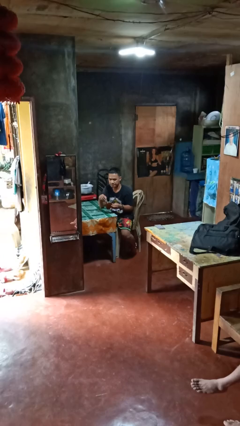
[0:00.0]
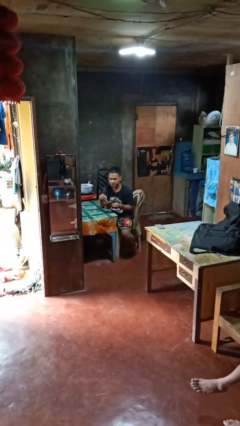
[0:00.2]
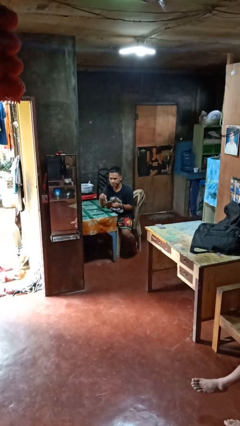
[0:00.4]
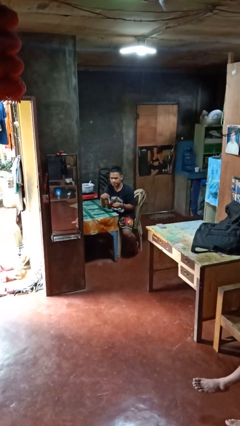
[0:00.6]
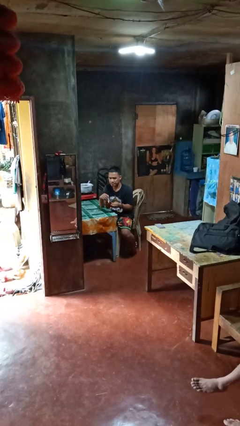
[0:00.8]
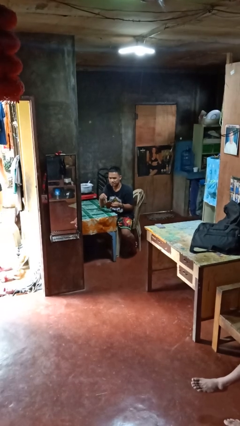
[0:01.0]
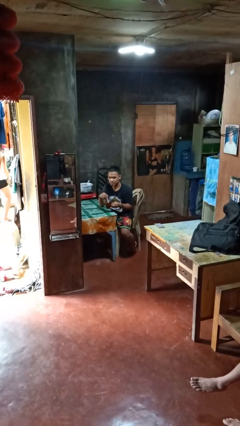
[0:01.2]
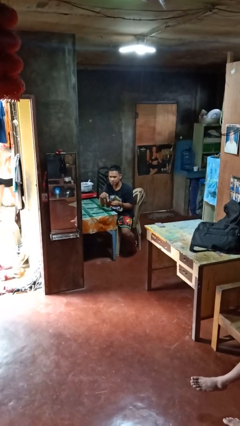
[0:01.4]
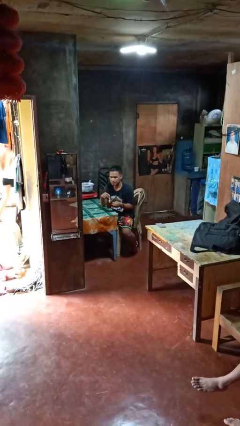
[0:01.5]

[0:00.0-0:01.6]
person stirs mug

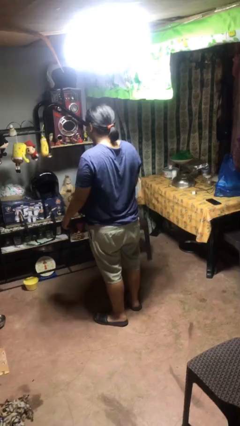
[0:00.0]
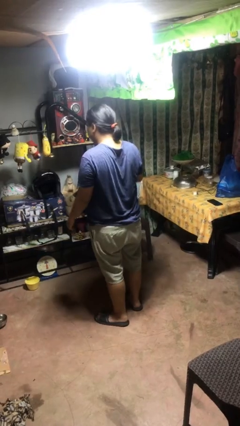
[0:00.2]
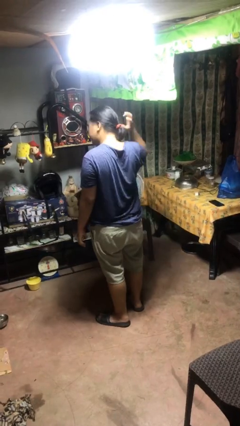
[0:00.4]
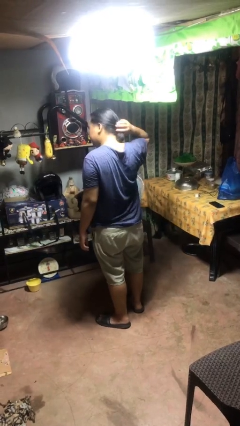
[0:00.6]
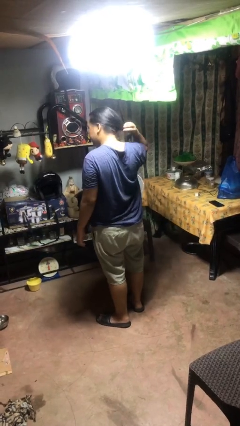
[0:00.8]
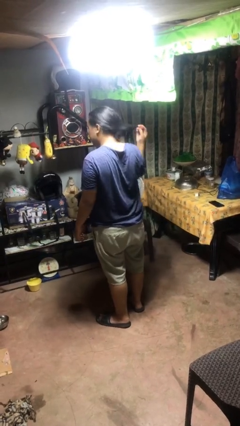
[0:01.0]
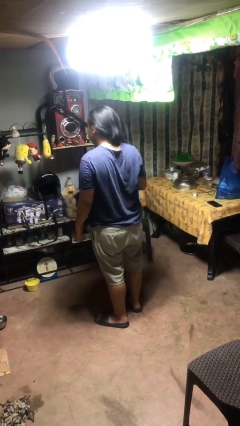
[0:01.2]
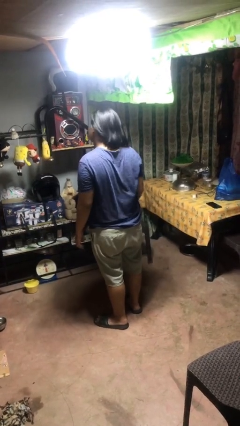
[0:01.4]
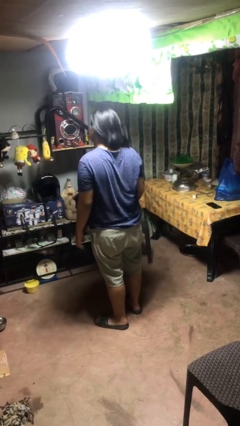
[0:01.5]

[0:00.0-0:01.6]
person takes off hairtie

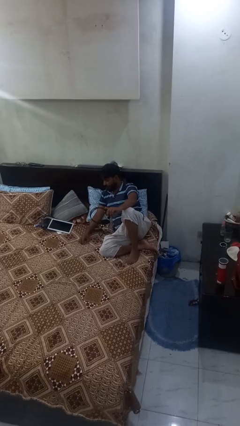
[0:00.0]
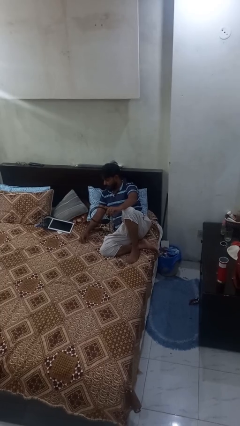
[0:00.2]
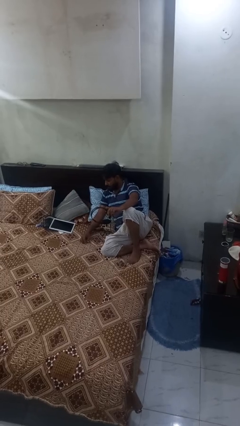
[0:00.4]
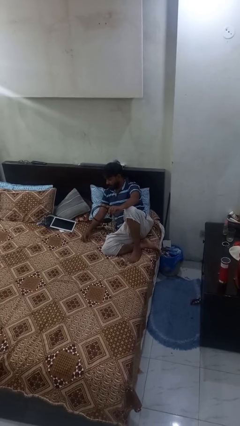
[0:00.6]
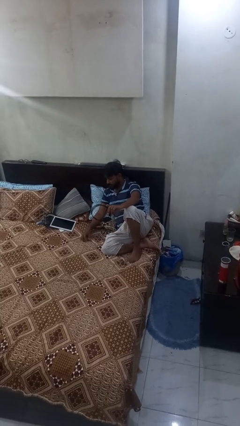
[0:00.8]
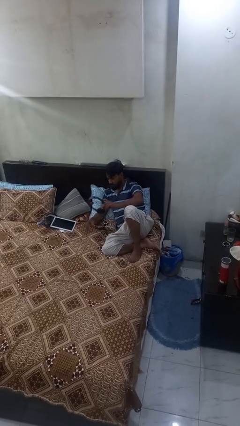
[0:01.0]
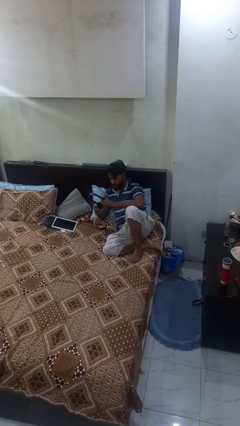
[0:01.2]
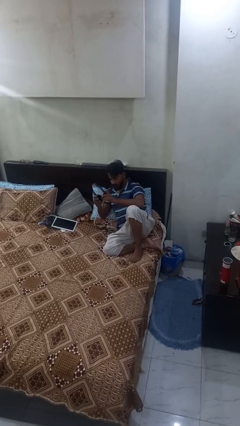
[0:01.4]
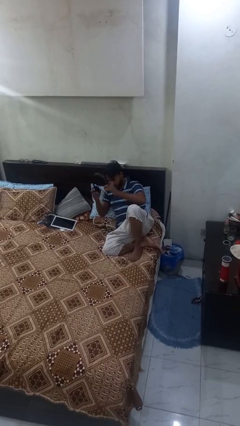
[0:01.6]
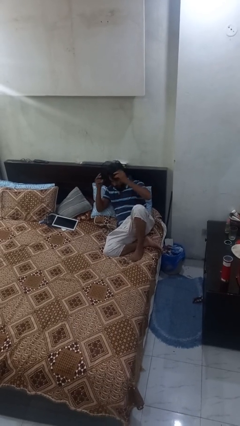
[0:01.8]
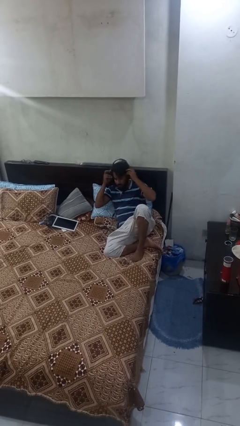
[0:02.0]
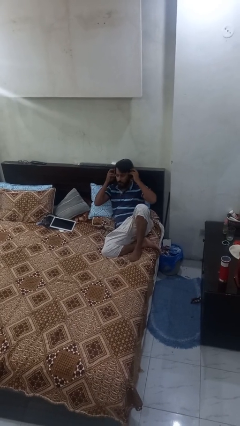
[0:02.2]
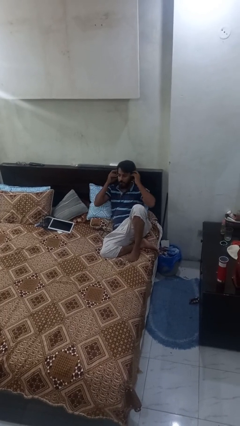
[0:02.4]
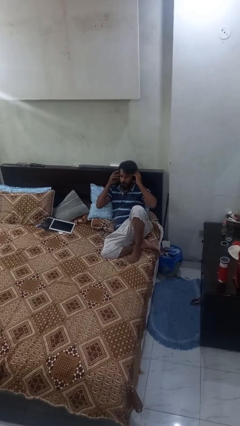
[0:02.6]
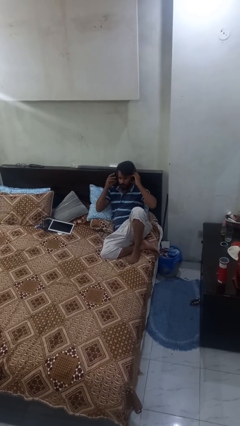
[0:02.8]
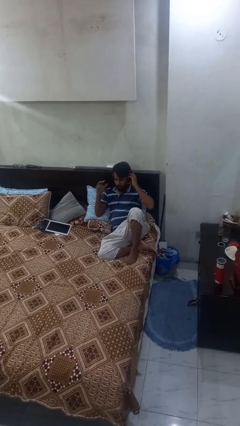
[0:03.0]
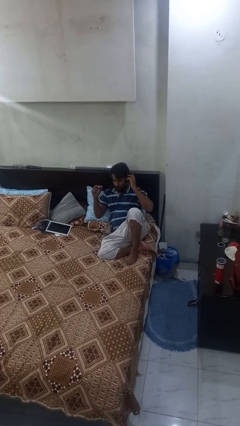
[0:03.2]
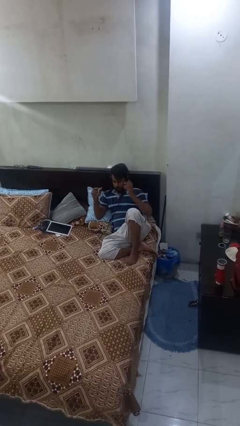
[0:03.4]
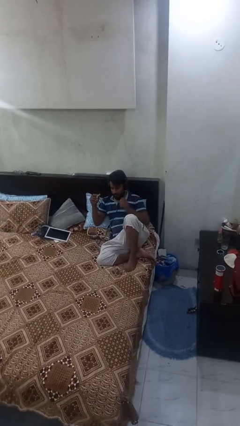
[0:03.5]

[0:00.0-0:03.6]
person puts on headphones

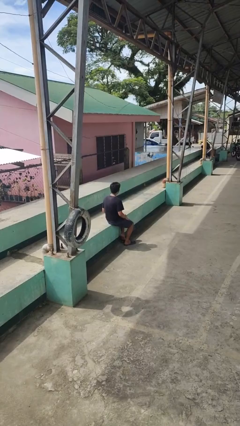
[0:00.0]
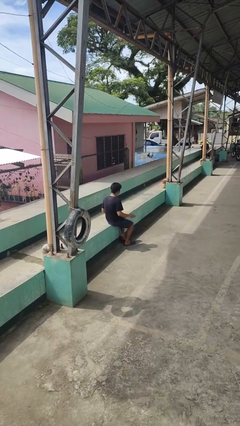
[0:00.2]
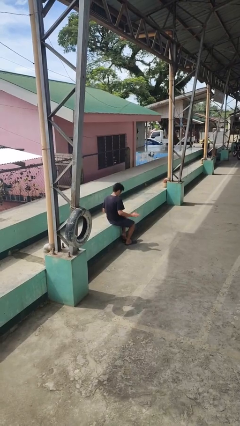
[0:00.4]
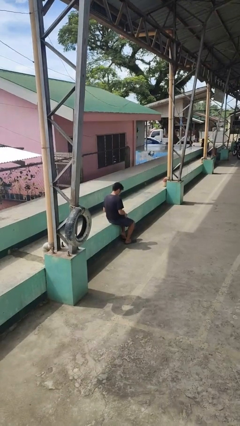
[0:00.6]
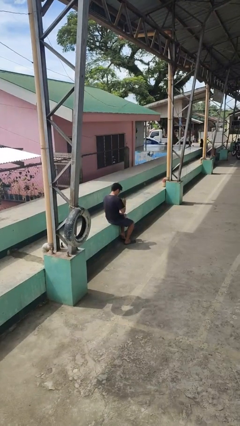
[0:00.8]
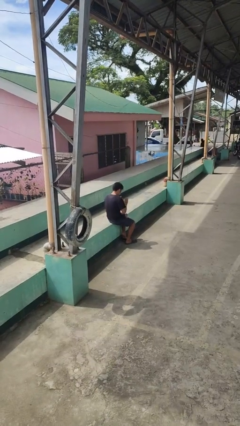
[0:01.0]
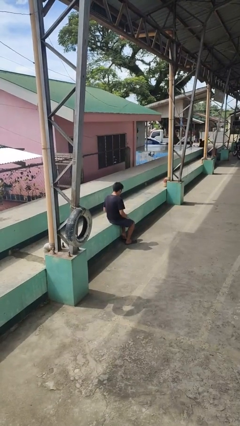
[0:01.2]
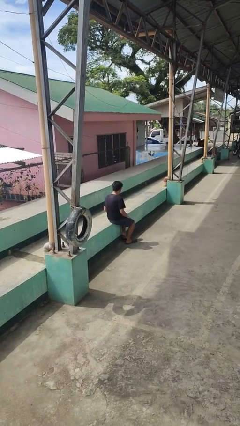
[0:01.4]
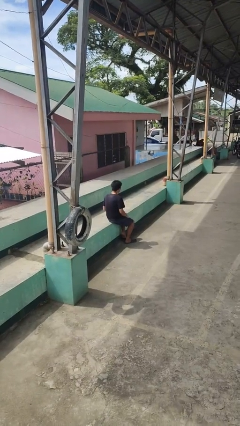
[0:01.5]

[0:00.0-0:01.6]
person slaps hands on thighs

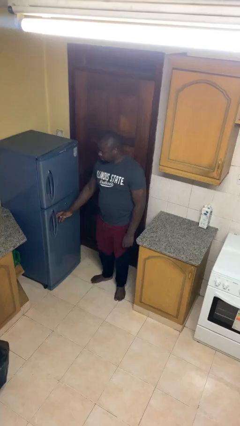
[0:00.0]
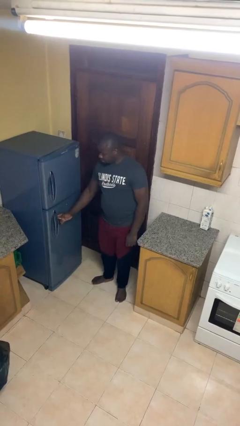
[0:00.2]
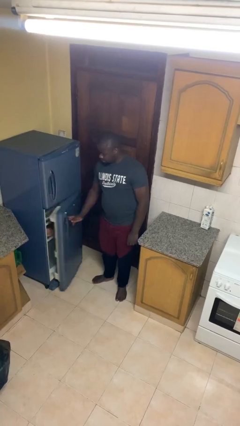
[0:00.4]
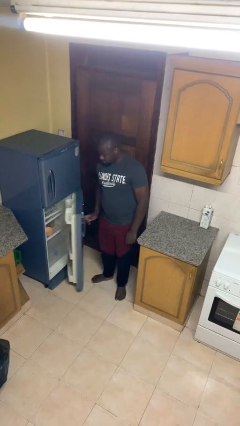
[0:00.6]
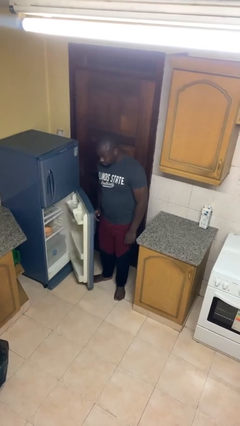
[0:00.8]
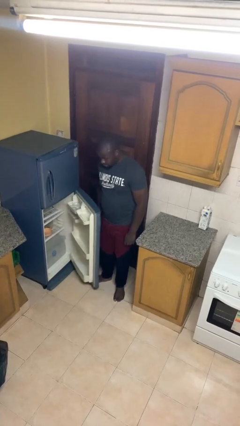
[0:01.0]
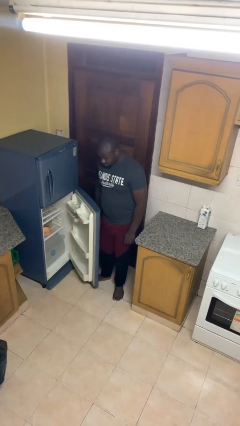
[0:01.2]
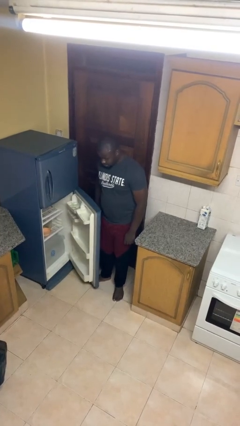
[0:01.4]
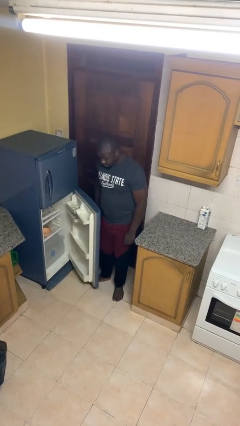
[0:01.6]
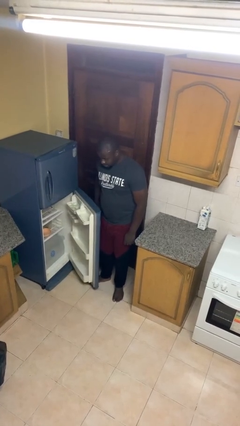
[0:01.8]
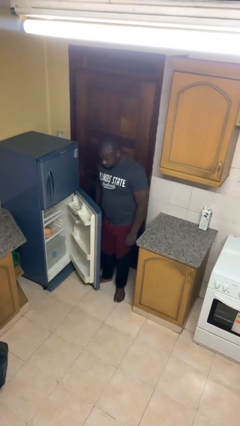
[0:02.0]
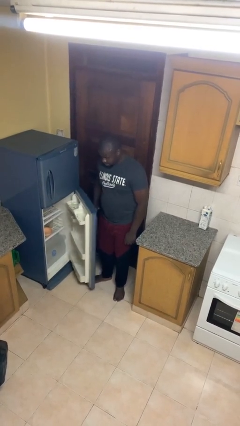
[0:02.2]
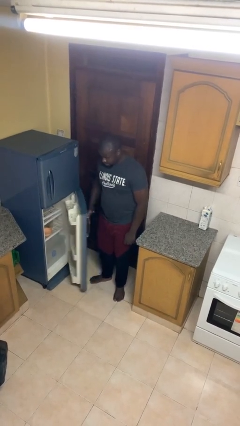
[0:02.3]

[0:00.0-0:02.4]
person opens refrigerator

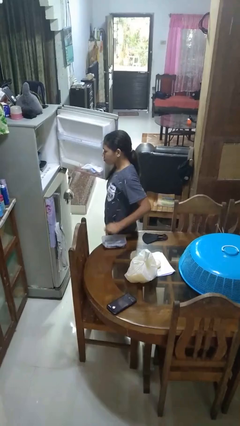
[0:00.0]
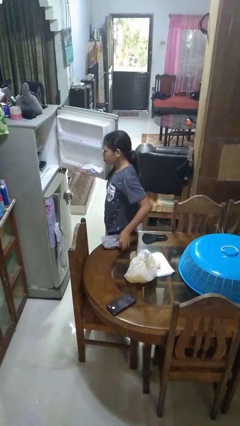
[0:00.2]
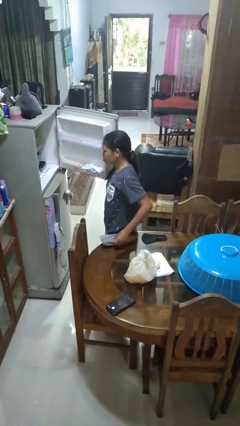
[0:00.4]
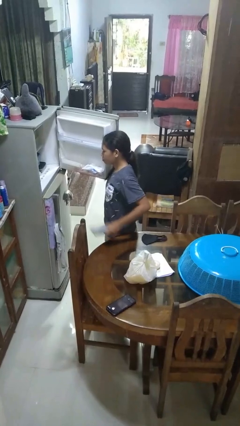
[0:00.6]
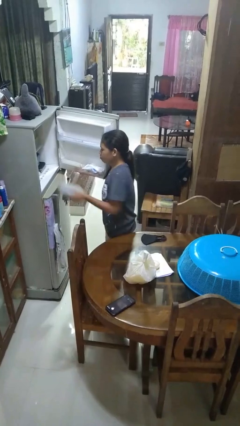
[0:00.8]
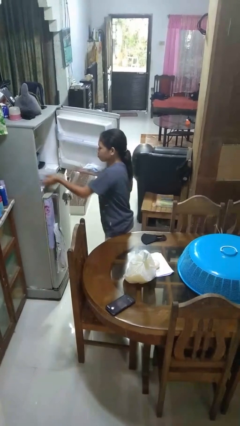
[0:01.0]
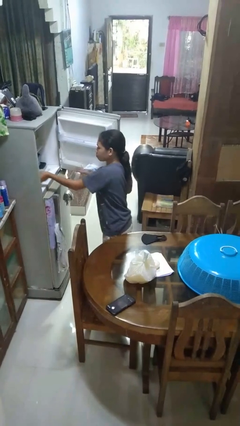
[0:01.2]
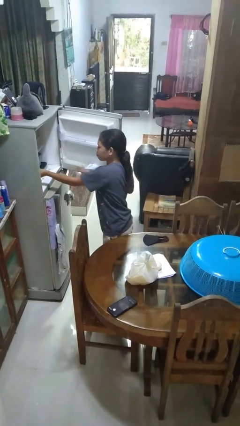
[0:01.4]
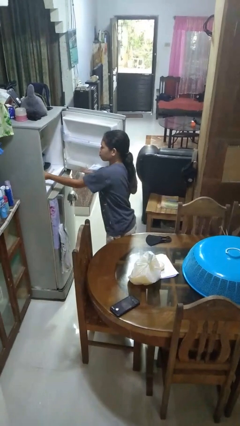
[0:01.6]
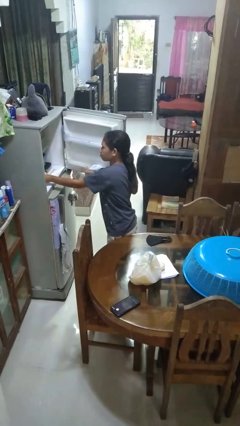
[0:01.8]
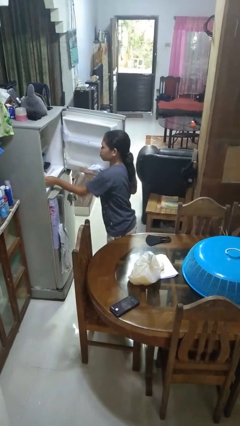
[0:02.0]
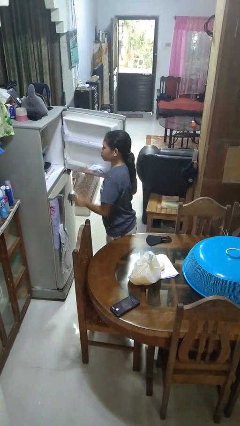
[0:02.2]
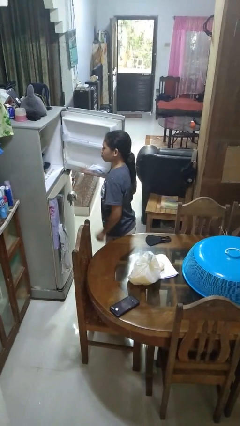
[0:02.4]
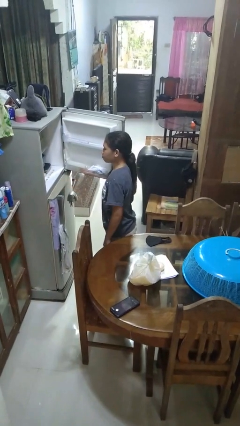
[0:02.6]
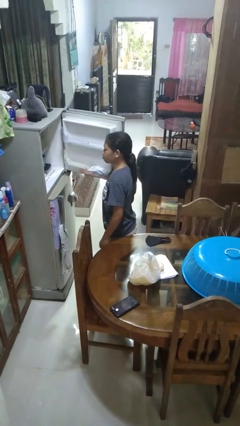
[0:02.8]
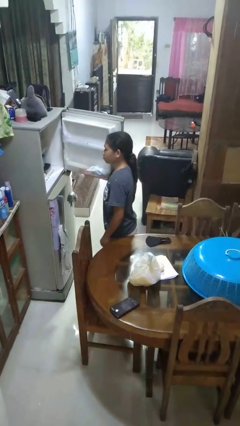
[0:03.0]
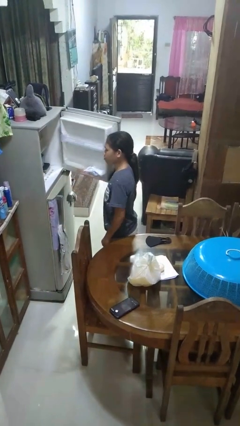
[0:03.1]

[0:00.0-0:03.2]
person puts object into refrigerator

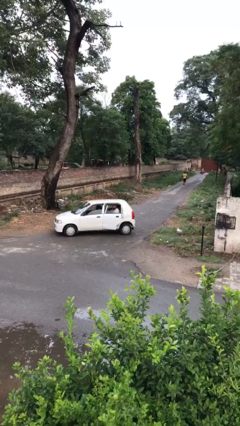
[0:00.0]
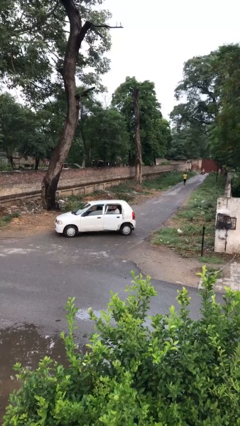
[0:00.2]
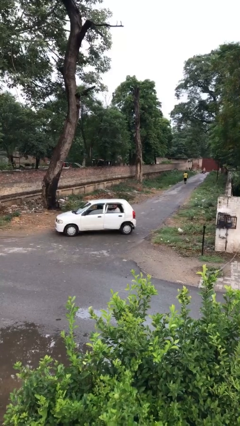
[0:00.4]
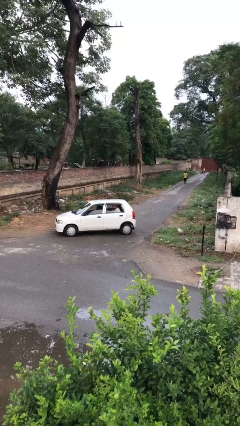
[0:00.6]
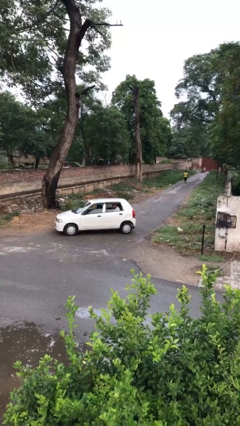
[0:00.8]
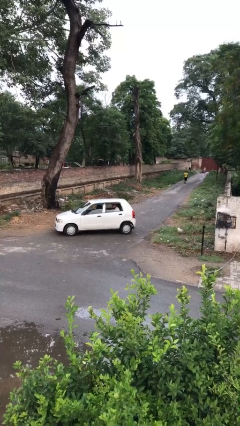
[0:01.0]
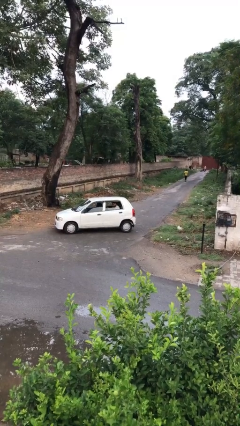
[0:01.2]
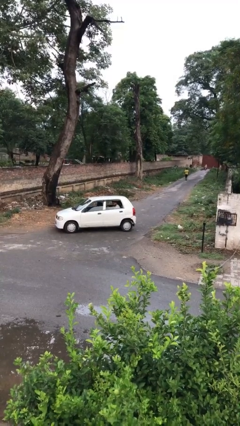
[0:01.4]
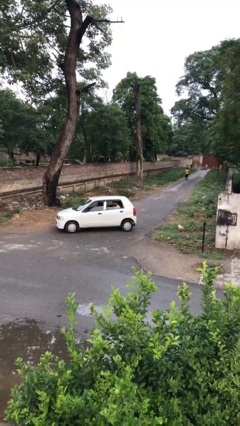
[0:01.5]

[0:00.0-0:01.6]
person closes car door

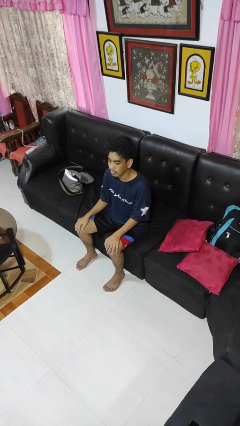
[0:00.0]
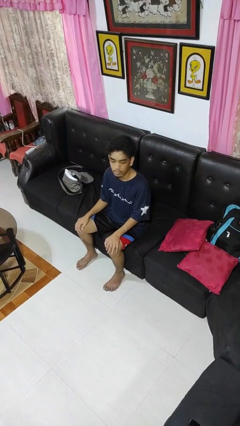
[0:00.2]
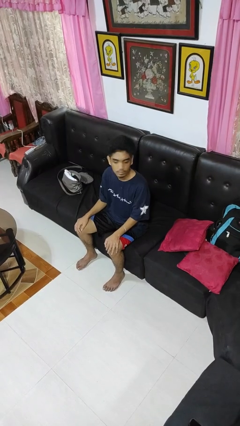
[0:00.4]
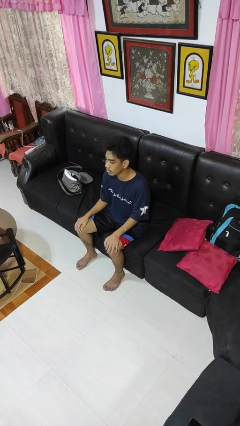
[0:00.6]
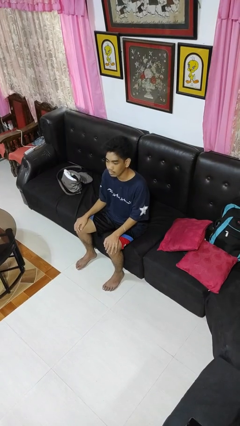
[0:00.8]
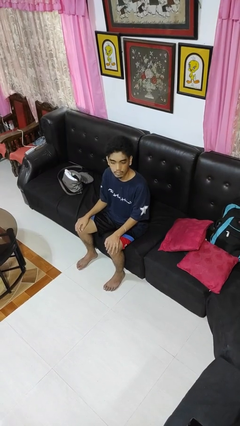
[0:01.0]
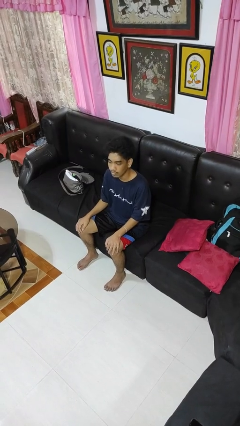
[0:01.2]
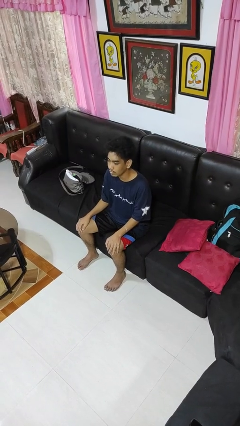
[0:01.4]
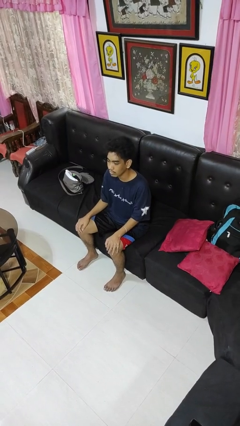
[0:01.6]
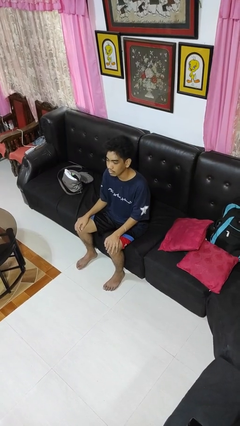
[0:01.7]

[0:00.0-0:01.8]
person shakes head
